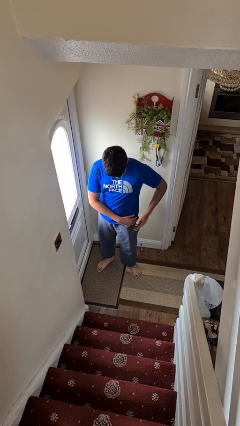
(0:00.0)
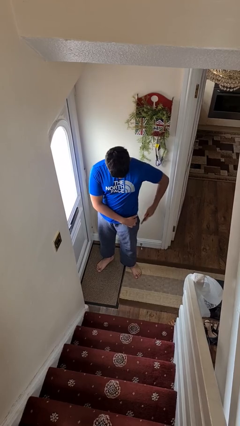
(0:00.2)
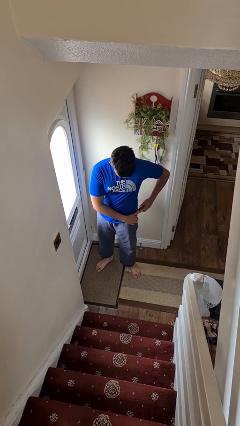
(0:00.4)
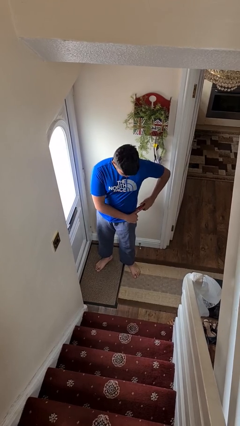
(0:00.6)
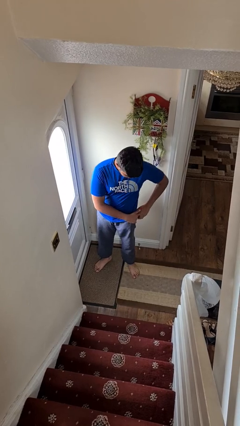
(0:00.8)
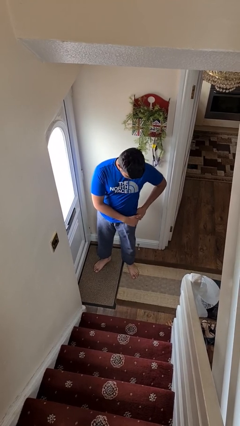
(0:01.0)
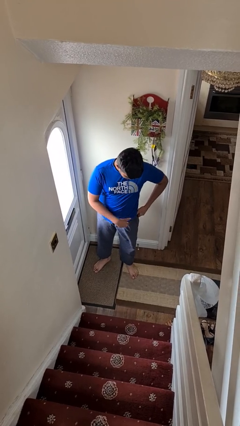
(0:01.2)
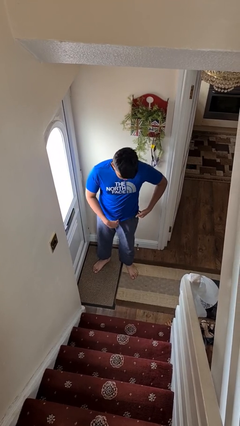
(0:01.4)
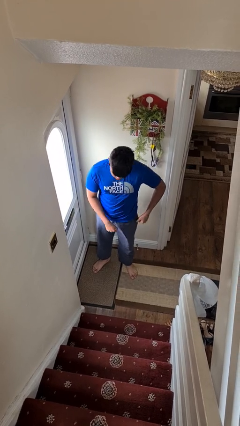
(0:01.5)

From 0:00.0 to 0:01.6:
person puts phone into pocket

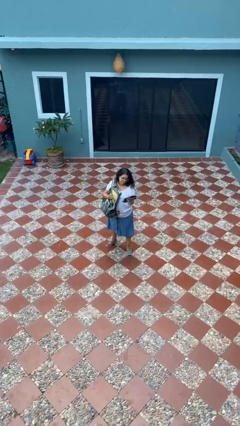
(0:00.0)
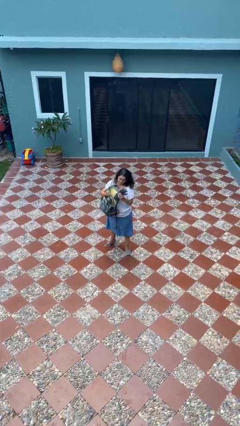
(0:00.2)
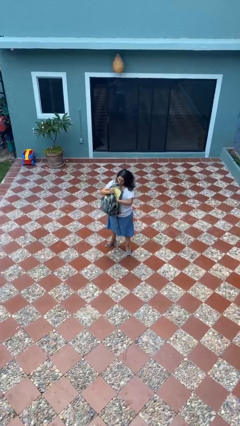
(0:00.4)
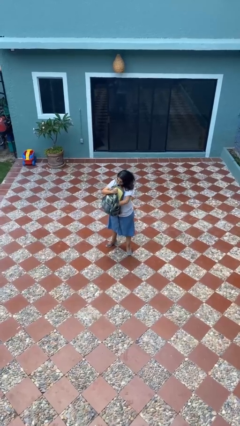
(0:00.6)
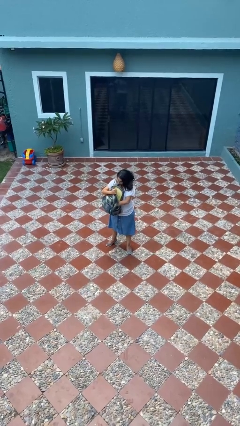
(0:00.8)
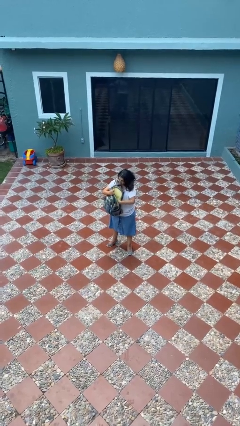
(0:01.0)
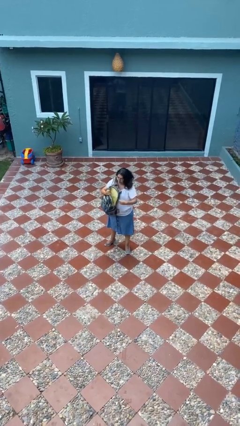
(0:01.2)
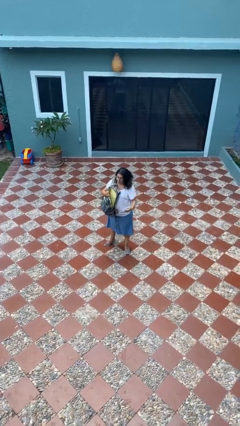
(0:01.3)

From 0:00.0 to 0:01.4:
person puts object into backpack

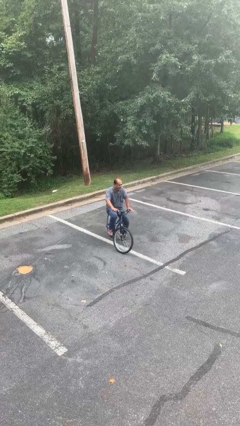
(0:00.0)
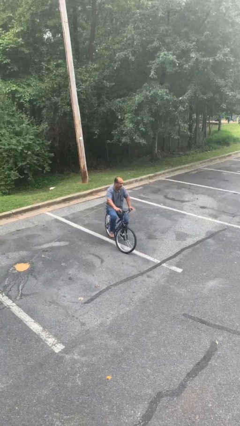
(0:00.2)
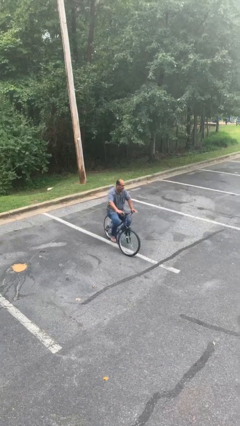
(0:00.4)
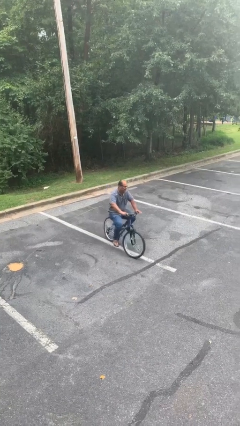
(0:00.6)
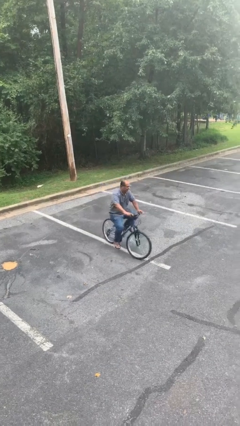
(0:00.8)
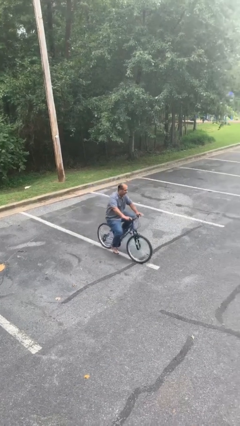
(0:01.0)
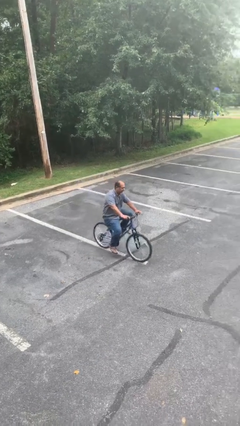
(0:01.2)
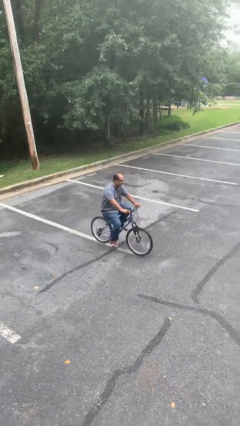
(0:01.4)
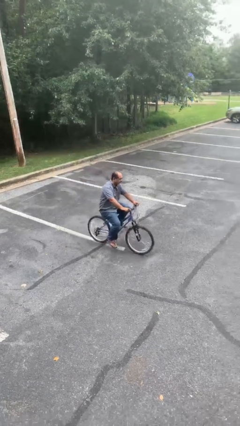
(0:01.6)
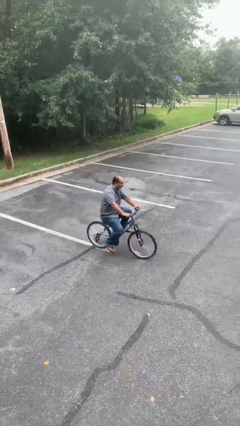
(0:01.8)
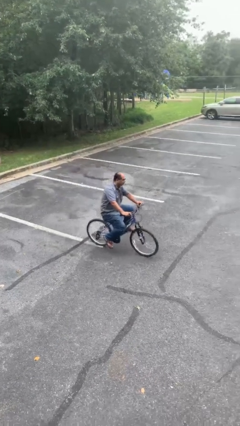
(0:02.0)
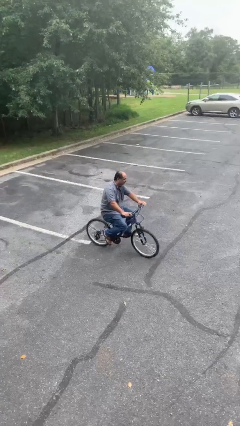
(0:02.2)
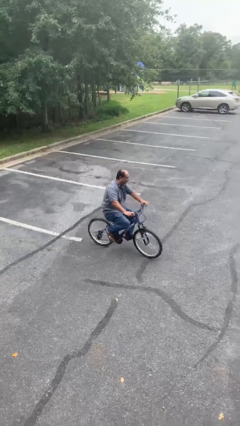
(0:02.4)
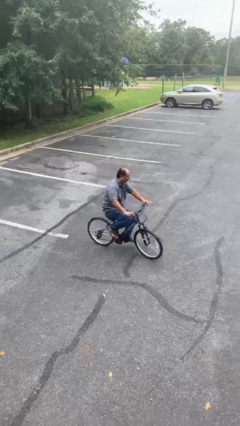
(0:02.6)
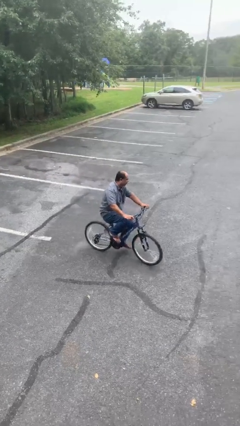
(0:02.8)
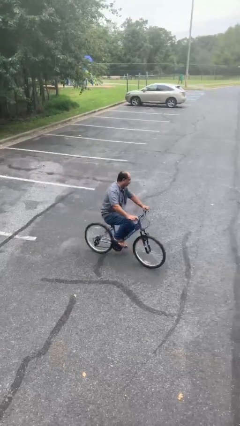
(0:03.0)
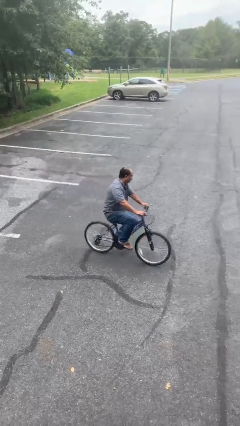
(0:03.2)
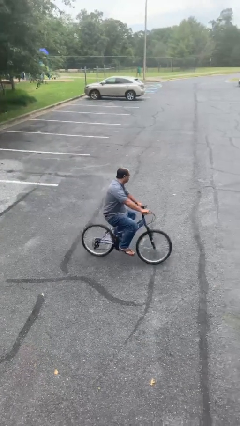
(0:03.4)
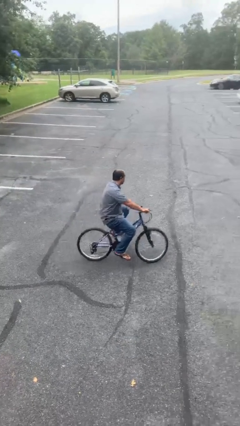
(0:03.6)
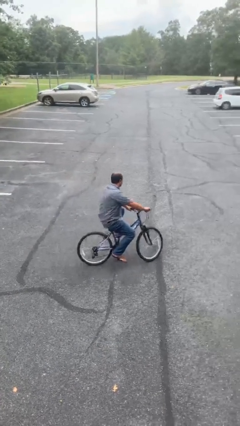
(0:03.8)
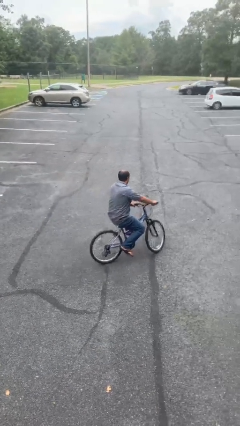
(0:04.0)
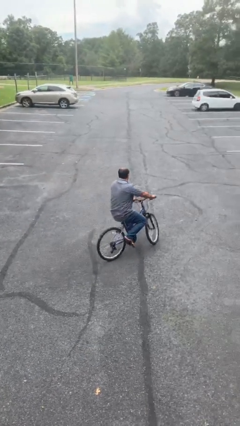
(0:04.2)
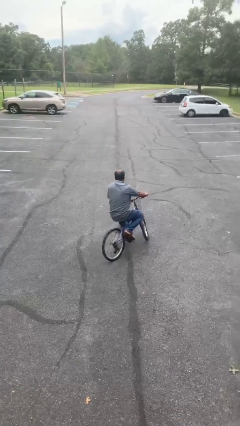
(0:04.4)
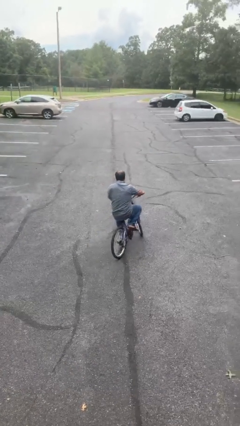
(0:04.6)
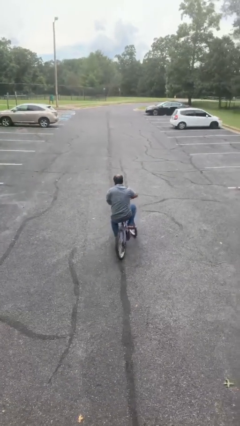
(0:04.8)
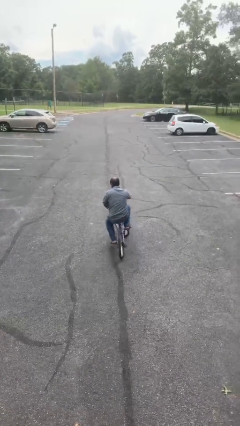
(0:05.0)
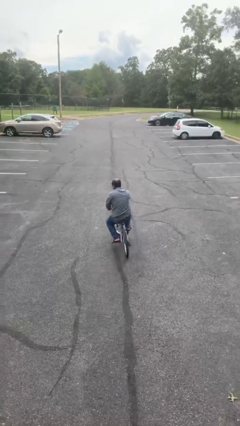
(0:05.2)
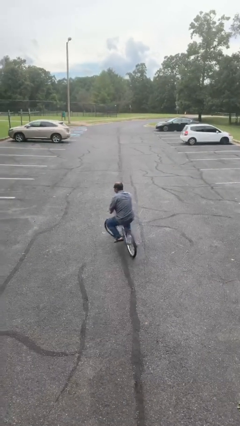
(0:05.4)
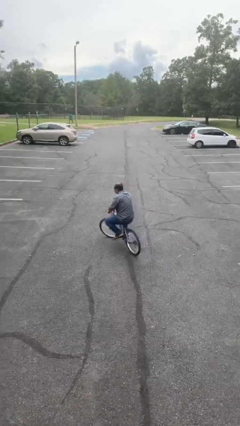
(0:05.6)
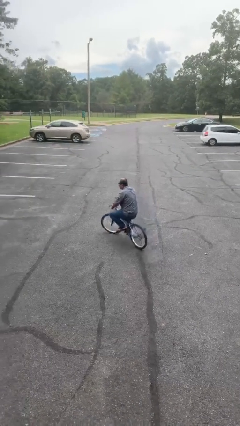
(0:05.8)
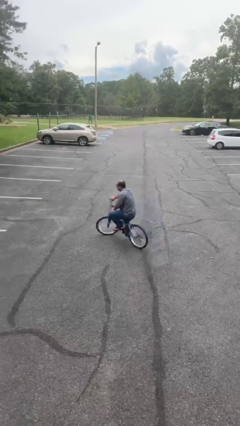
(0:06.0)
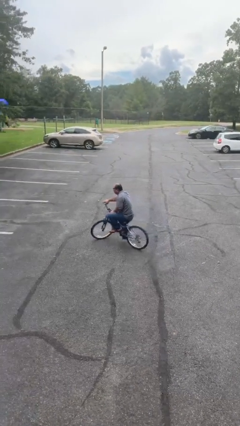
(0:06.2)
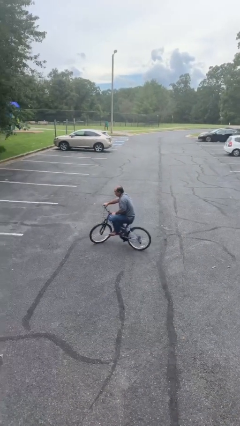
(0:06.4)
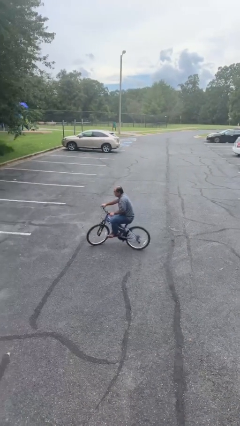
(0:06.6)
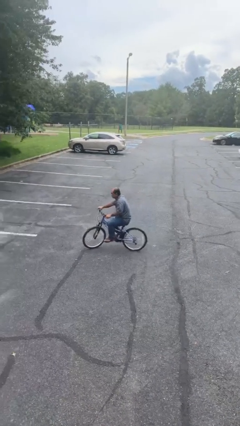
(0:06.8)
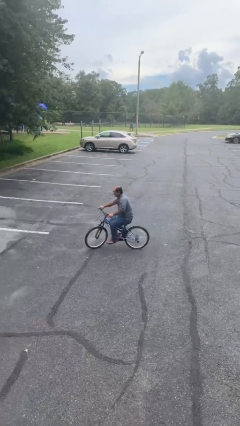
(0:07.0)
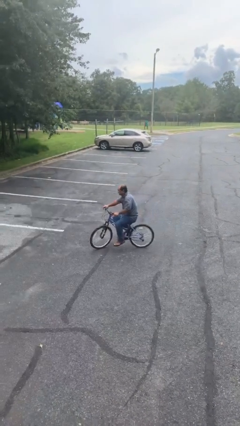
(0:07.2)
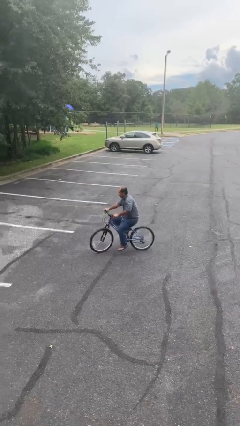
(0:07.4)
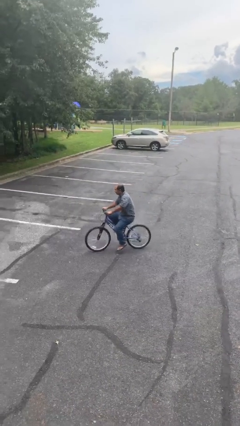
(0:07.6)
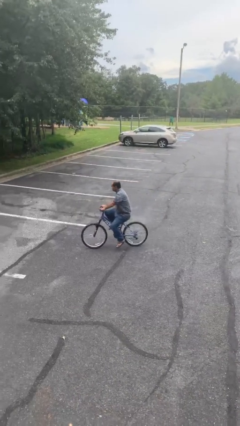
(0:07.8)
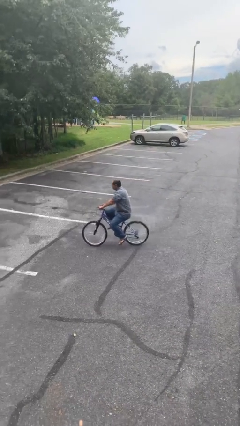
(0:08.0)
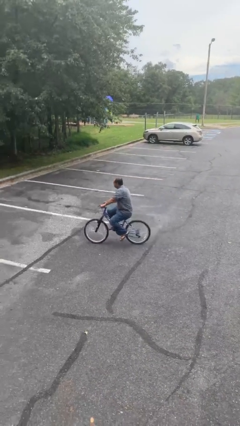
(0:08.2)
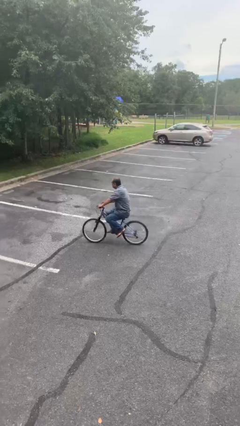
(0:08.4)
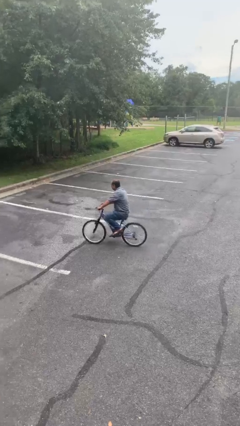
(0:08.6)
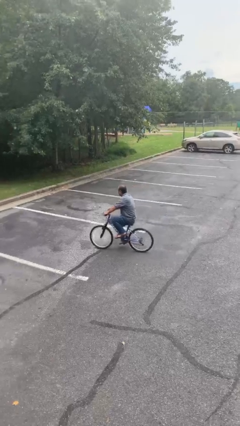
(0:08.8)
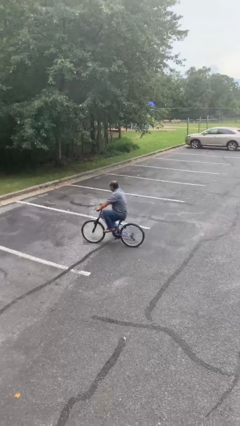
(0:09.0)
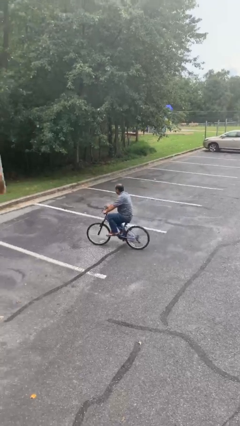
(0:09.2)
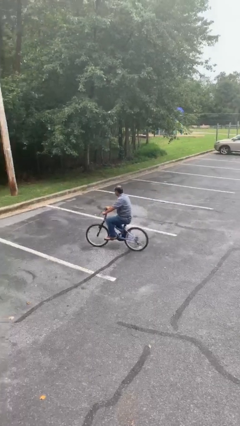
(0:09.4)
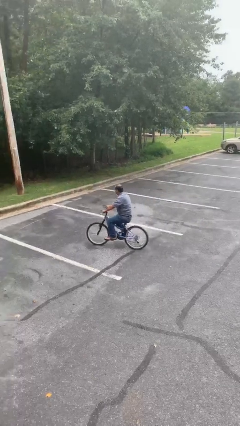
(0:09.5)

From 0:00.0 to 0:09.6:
person rides bicycle

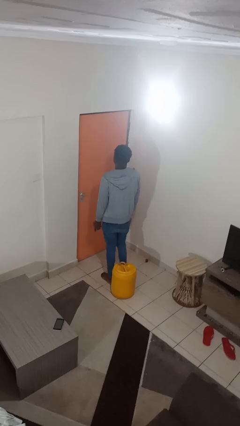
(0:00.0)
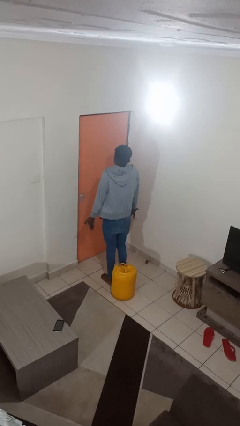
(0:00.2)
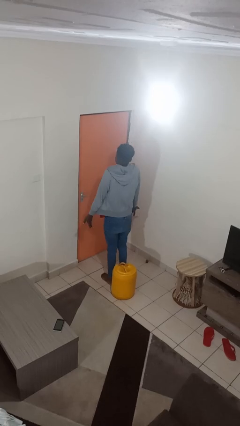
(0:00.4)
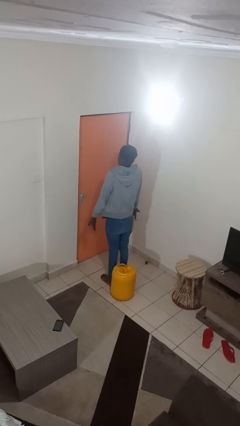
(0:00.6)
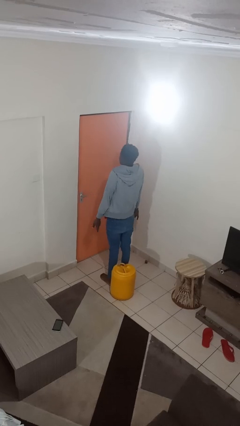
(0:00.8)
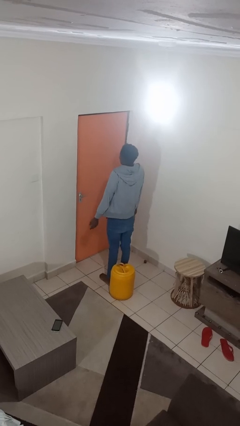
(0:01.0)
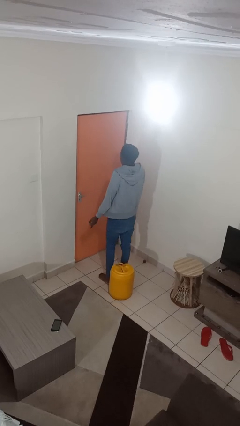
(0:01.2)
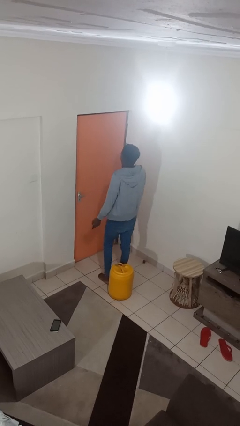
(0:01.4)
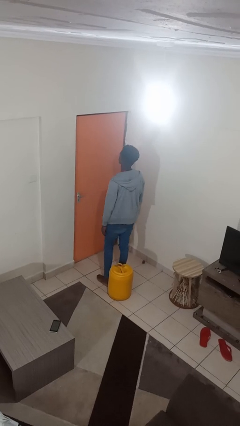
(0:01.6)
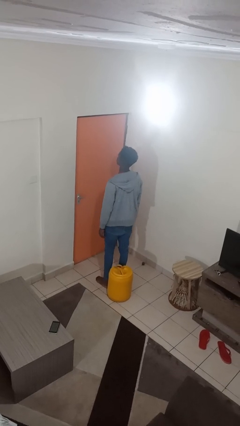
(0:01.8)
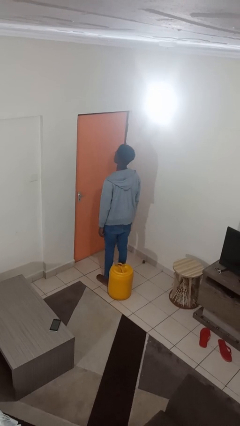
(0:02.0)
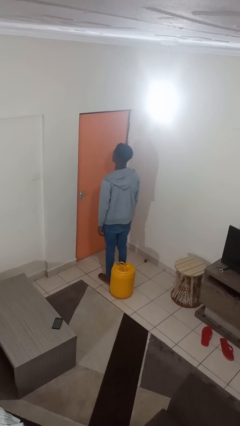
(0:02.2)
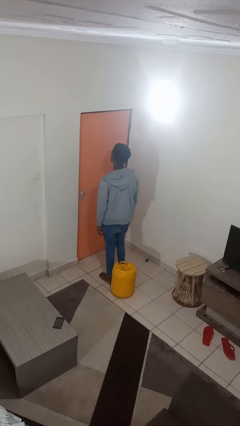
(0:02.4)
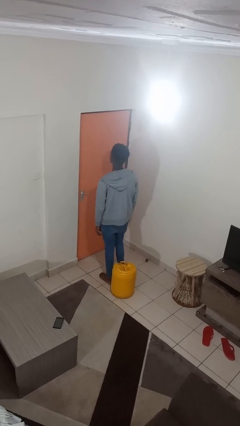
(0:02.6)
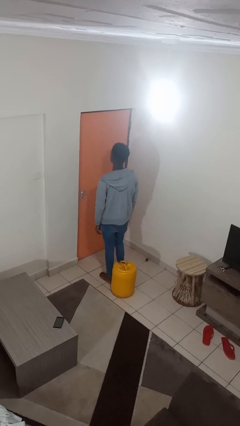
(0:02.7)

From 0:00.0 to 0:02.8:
person shrugs

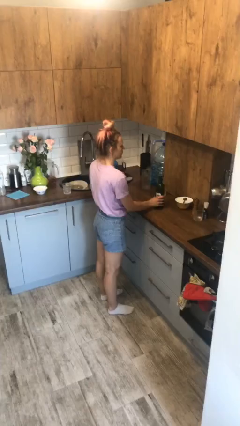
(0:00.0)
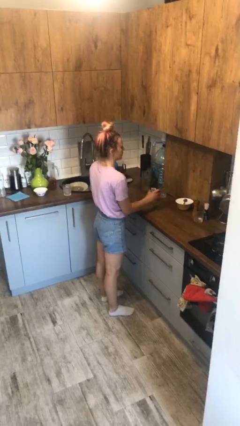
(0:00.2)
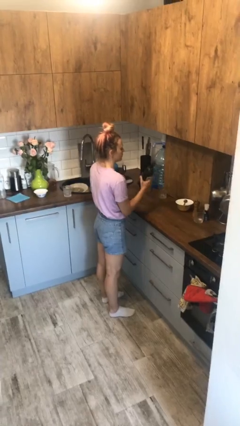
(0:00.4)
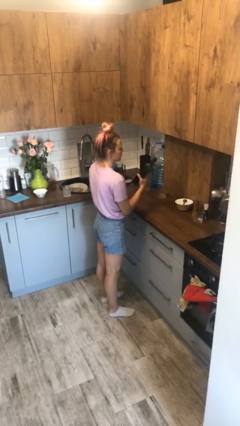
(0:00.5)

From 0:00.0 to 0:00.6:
person picks up object from countertop

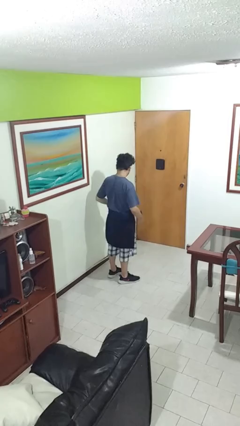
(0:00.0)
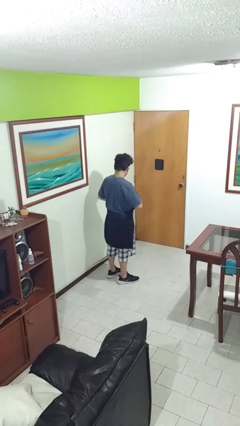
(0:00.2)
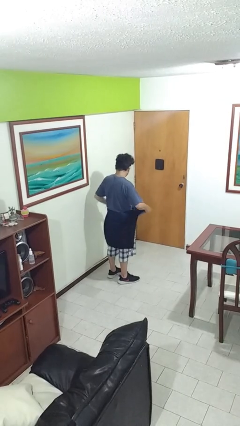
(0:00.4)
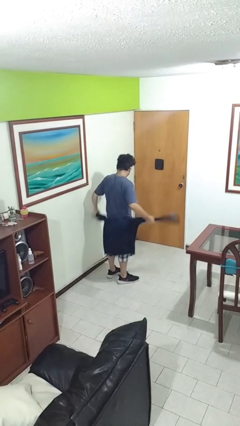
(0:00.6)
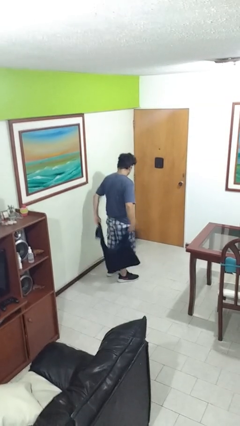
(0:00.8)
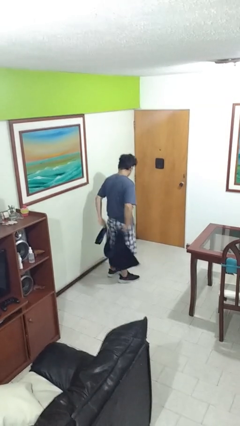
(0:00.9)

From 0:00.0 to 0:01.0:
person unties jacket around waist

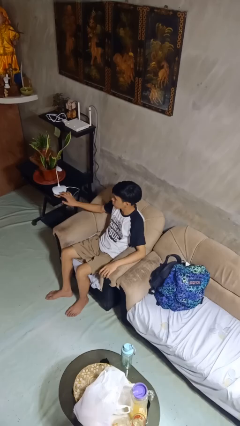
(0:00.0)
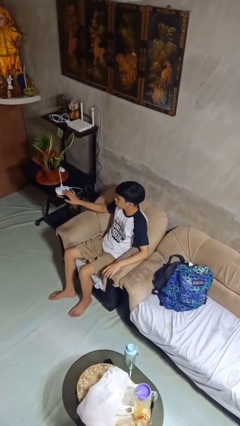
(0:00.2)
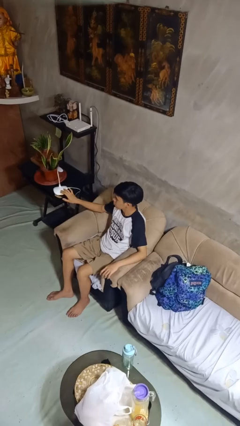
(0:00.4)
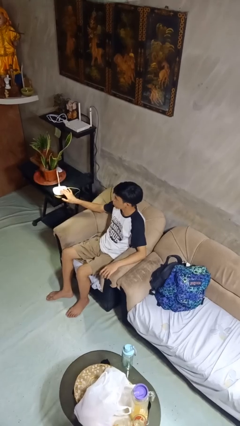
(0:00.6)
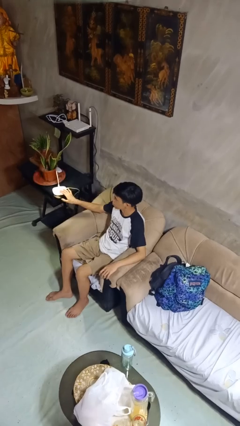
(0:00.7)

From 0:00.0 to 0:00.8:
person turns on lamp
